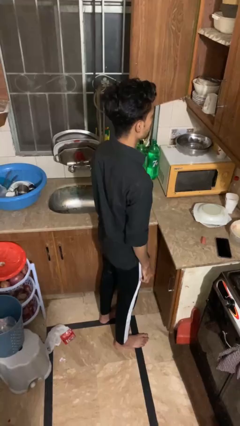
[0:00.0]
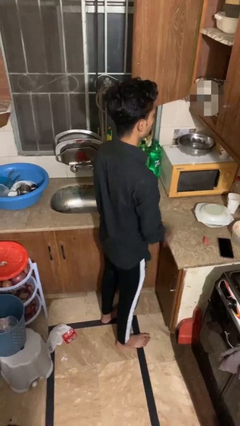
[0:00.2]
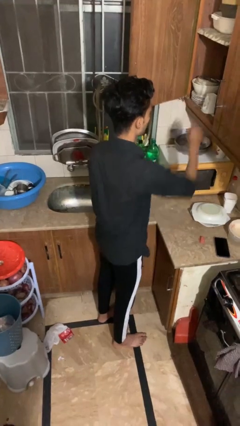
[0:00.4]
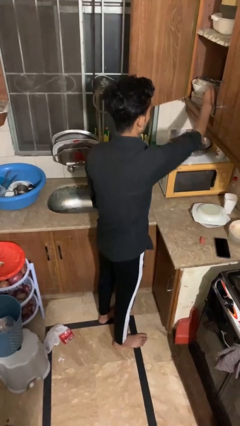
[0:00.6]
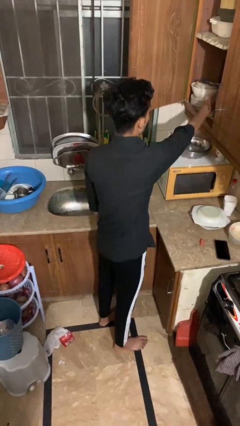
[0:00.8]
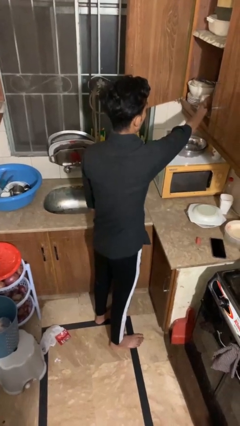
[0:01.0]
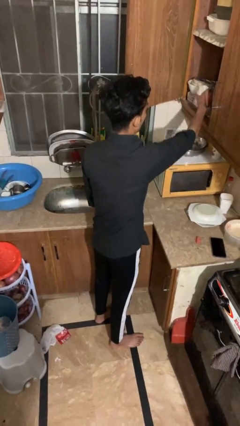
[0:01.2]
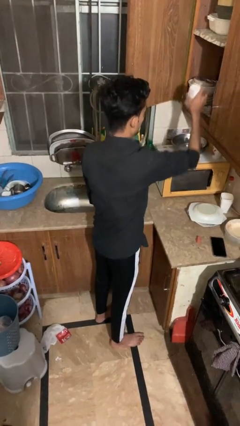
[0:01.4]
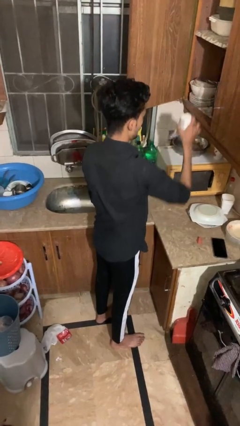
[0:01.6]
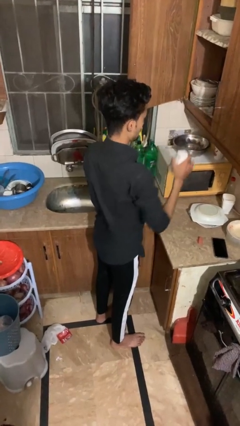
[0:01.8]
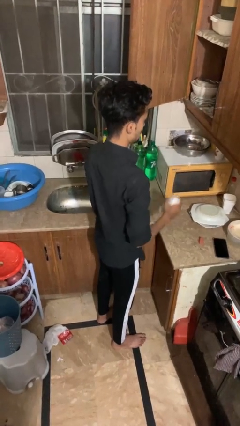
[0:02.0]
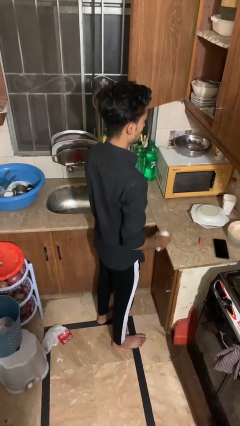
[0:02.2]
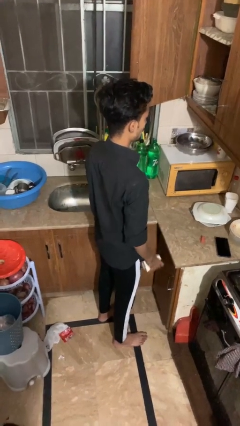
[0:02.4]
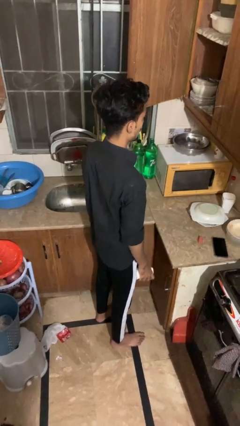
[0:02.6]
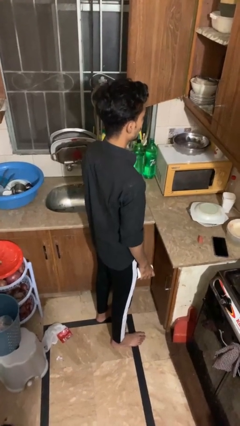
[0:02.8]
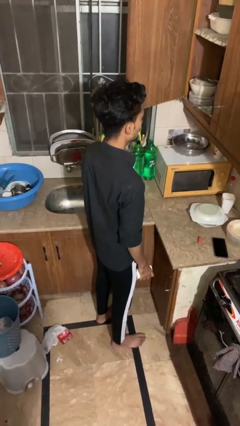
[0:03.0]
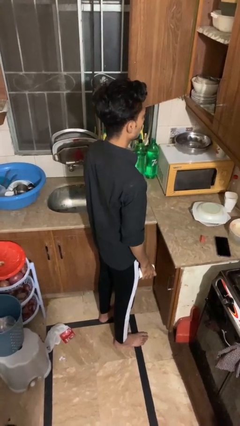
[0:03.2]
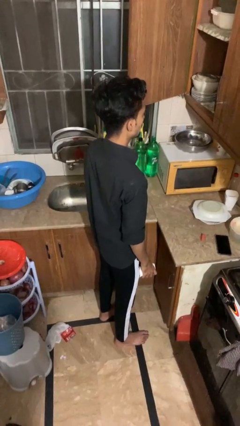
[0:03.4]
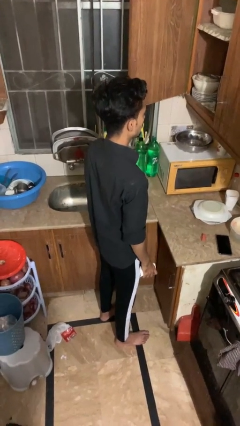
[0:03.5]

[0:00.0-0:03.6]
person picks up object from cabinet

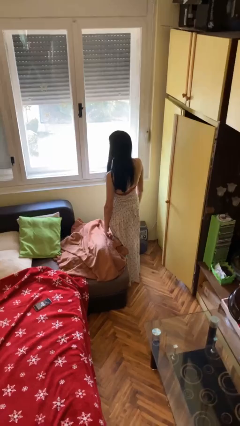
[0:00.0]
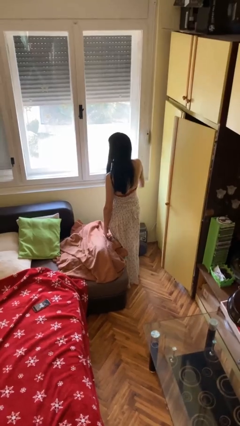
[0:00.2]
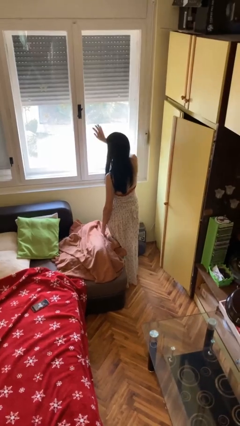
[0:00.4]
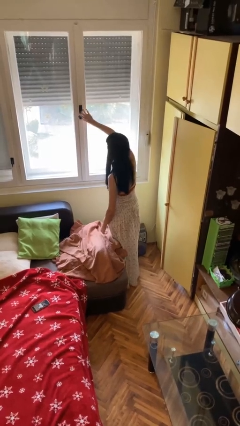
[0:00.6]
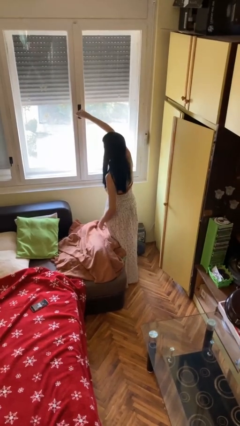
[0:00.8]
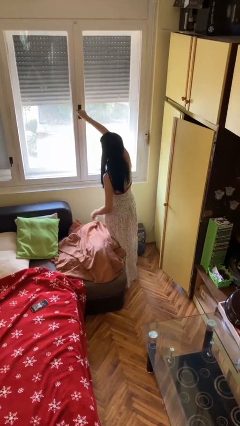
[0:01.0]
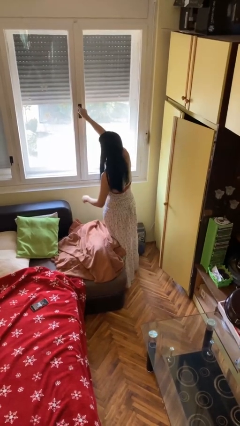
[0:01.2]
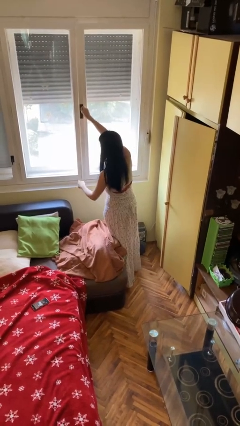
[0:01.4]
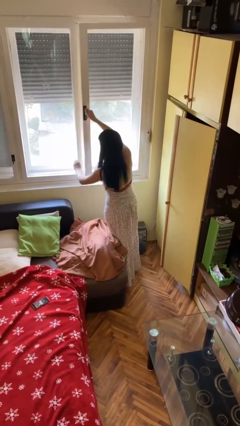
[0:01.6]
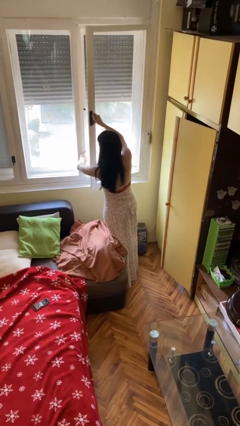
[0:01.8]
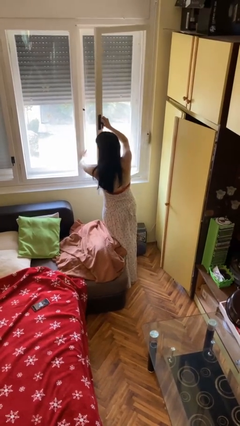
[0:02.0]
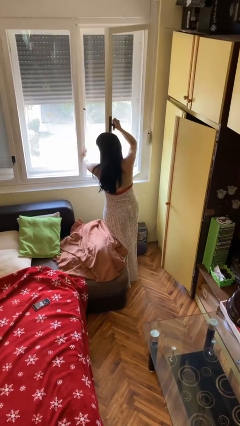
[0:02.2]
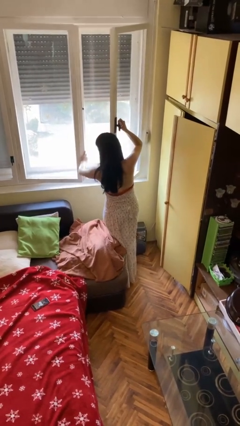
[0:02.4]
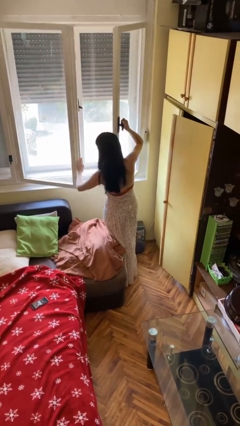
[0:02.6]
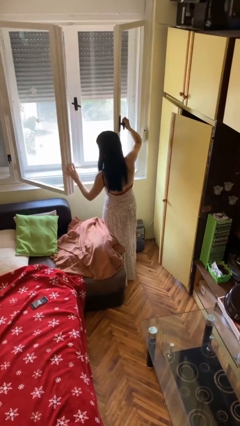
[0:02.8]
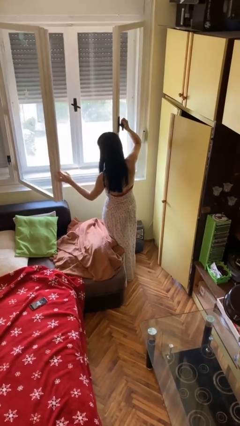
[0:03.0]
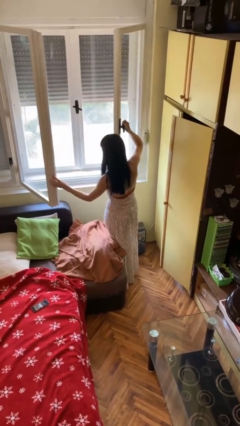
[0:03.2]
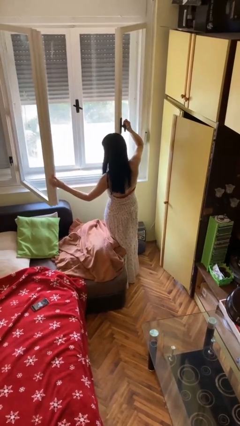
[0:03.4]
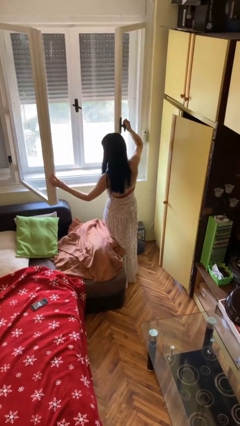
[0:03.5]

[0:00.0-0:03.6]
person opens microwave

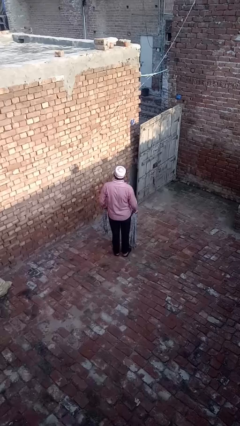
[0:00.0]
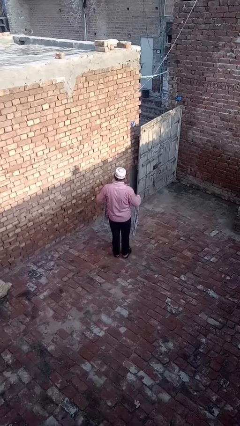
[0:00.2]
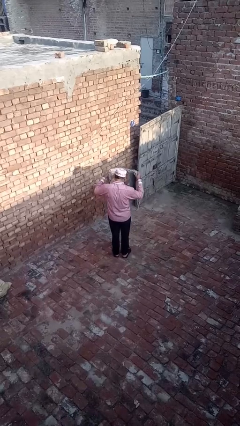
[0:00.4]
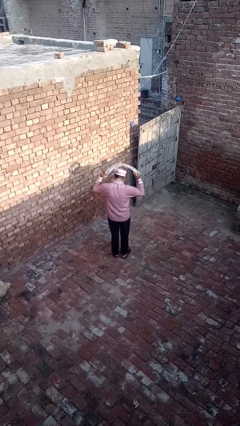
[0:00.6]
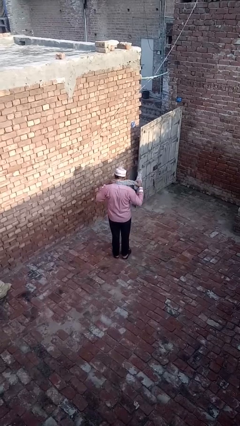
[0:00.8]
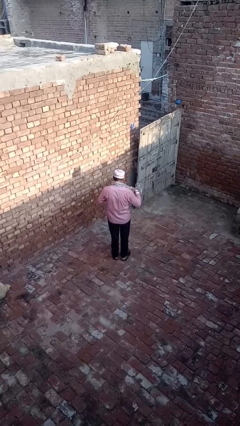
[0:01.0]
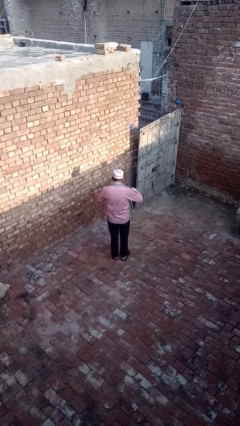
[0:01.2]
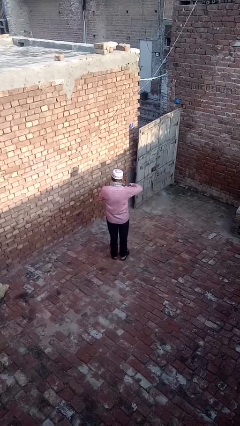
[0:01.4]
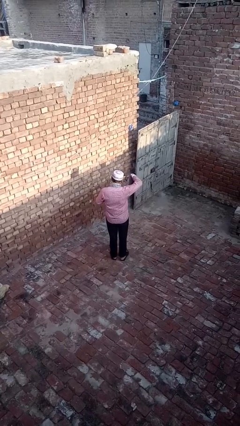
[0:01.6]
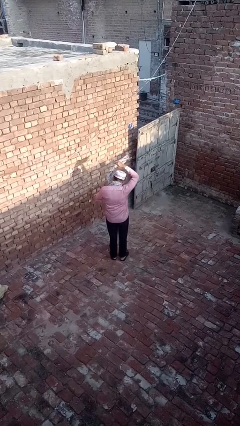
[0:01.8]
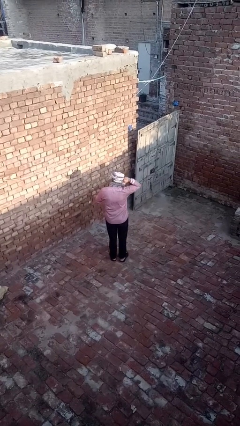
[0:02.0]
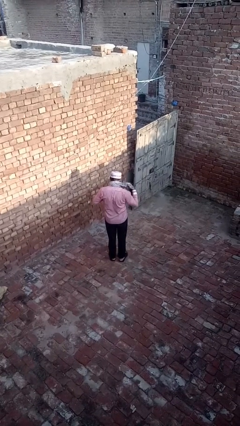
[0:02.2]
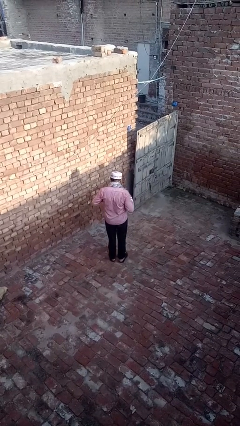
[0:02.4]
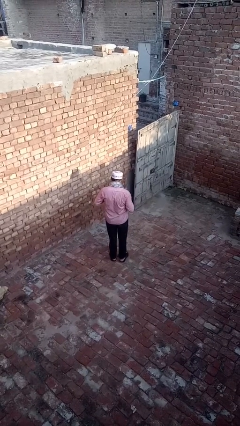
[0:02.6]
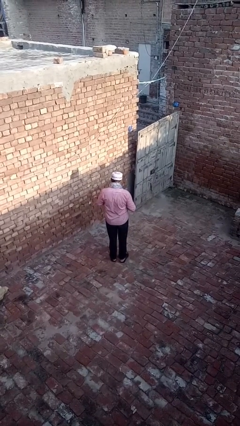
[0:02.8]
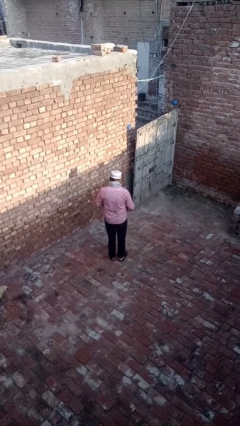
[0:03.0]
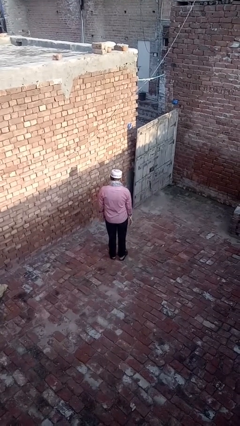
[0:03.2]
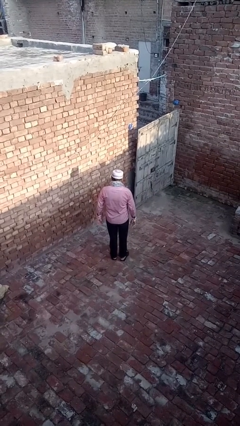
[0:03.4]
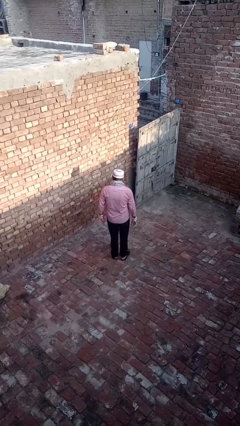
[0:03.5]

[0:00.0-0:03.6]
person puts on scarf

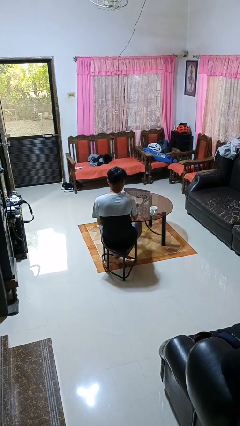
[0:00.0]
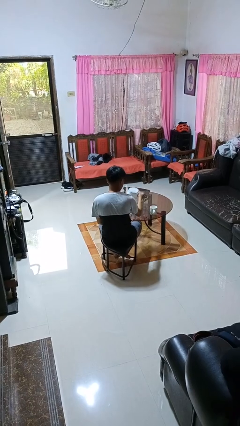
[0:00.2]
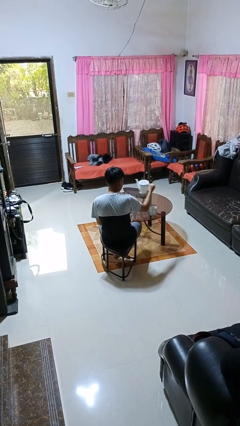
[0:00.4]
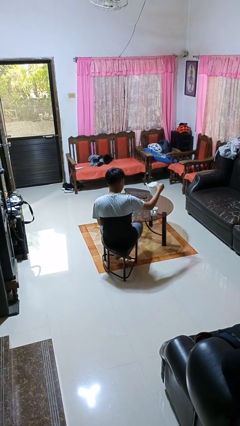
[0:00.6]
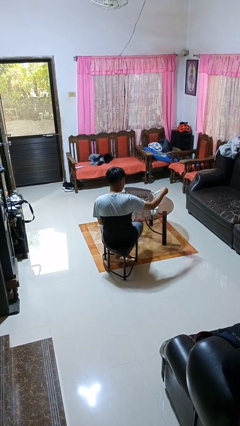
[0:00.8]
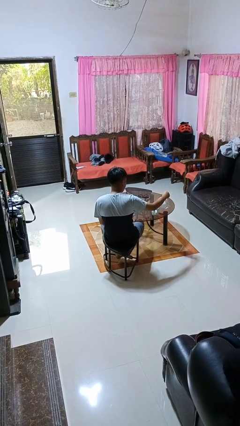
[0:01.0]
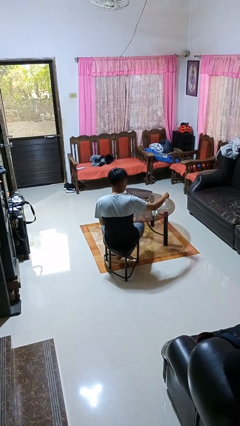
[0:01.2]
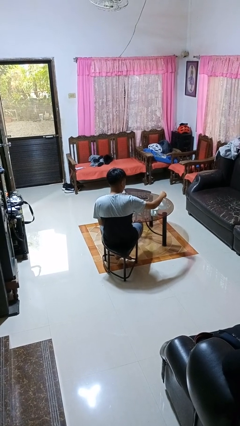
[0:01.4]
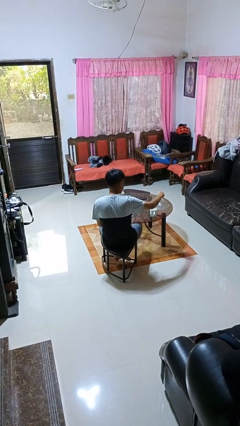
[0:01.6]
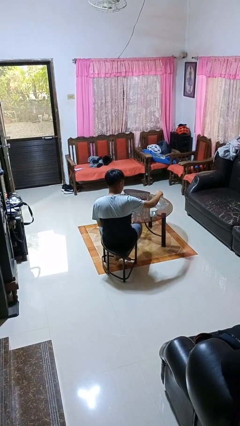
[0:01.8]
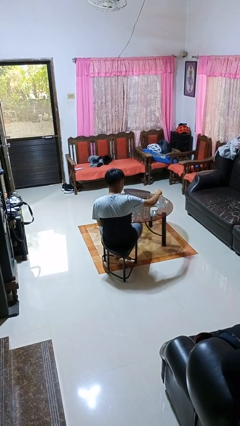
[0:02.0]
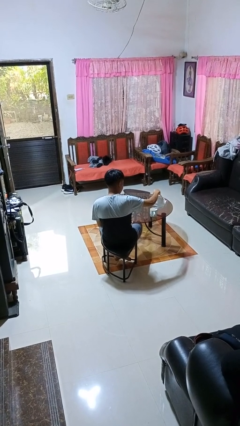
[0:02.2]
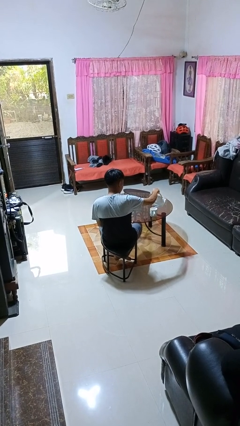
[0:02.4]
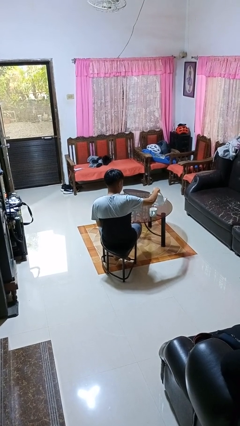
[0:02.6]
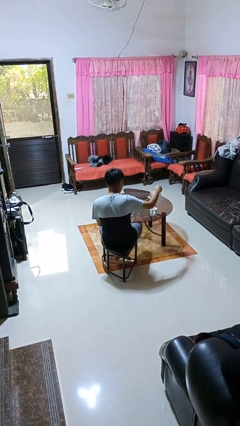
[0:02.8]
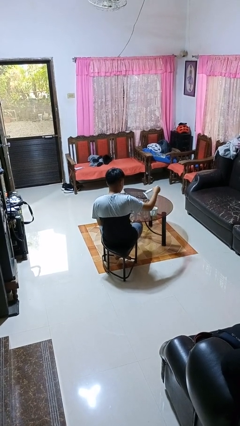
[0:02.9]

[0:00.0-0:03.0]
person pours coffee into mug

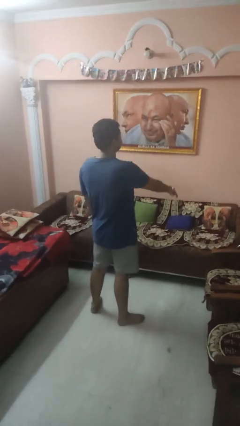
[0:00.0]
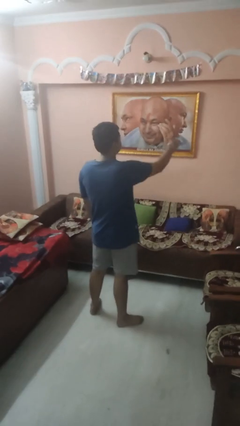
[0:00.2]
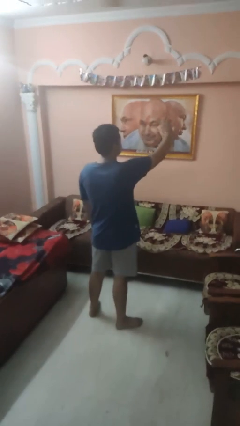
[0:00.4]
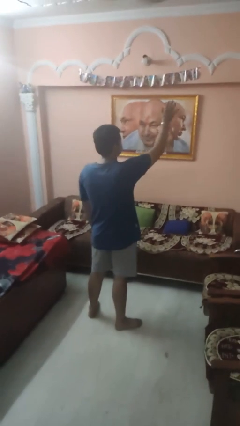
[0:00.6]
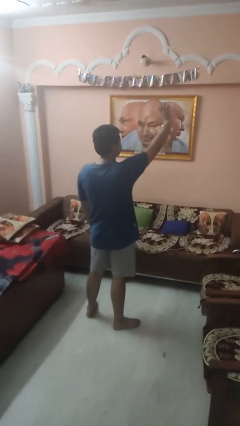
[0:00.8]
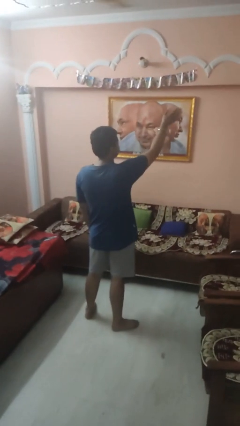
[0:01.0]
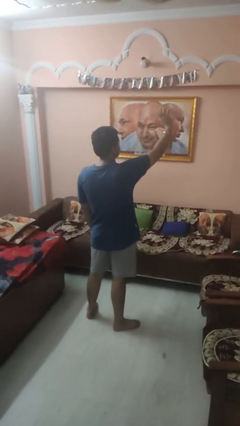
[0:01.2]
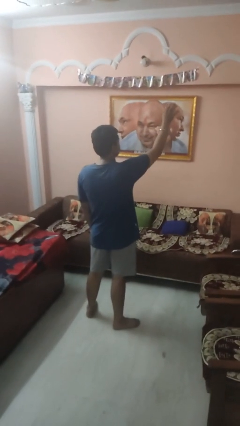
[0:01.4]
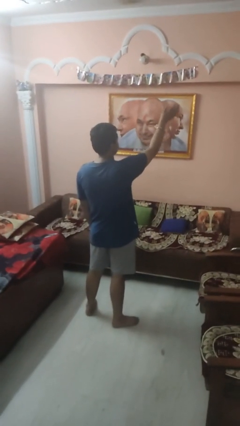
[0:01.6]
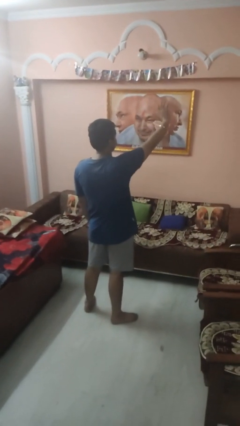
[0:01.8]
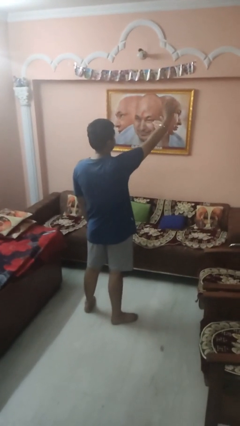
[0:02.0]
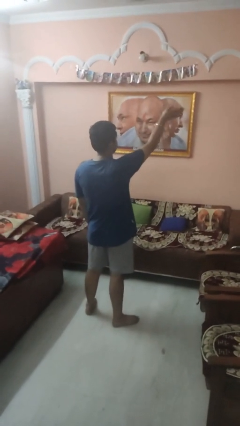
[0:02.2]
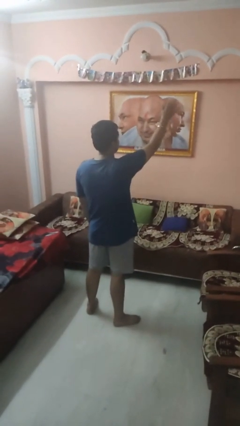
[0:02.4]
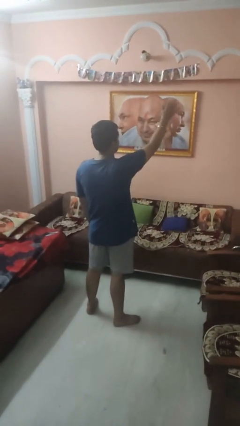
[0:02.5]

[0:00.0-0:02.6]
person waves at person

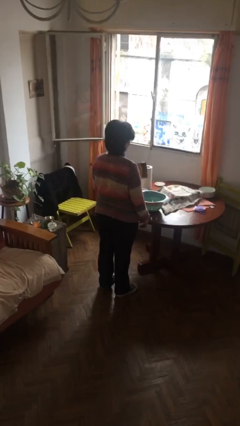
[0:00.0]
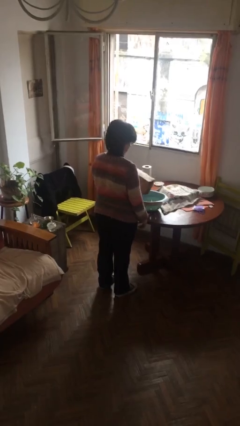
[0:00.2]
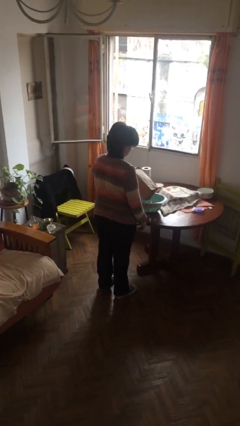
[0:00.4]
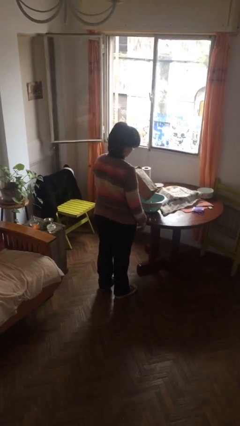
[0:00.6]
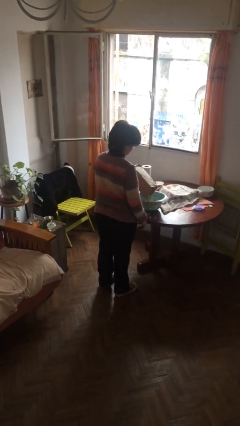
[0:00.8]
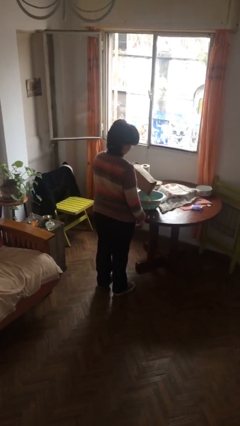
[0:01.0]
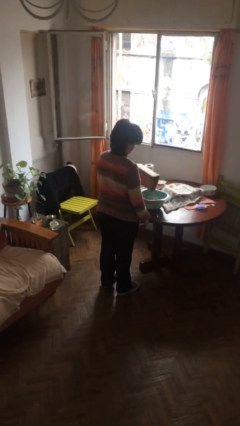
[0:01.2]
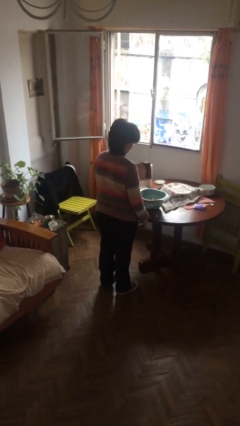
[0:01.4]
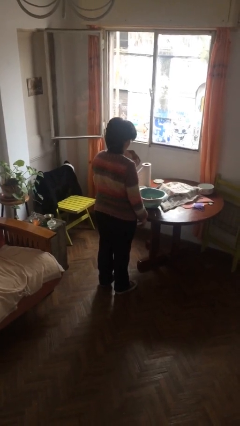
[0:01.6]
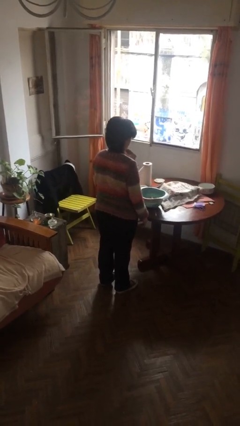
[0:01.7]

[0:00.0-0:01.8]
person pours into bowl
